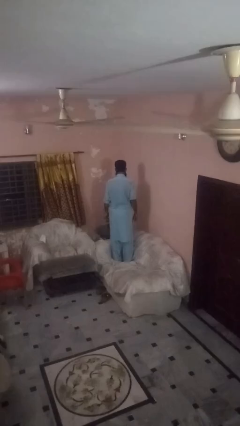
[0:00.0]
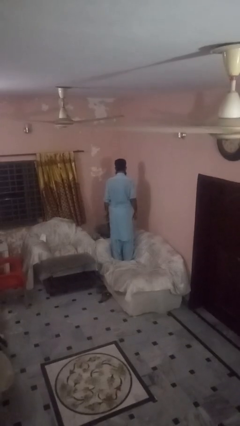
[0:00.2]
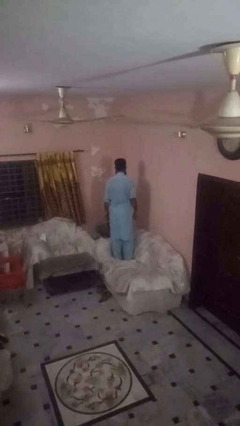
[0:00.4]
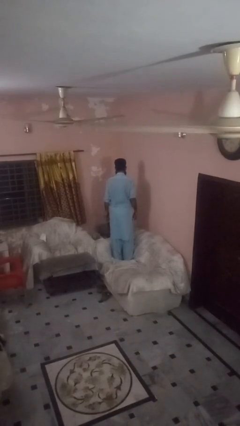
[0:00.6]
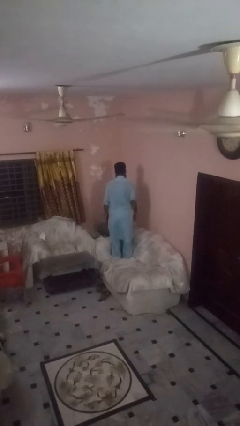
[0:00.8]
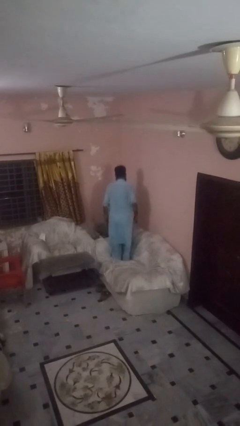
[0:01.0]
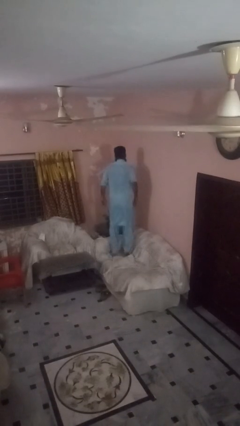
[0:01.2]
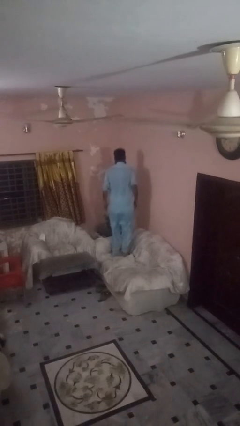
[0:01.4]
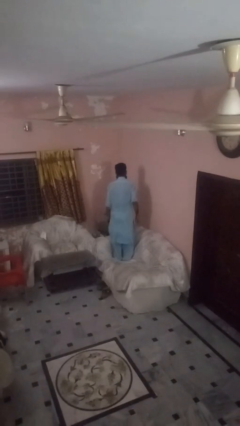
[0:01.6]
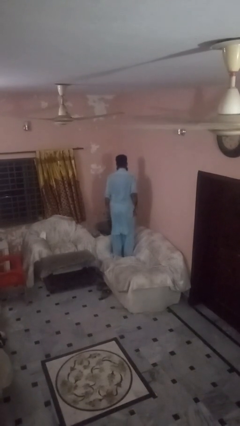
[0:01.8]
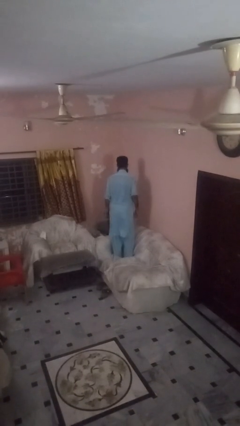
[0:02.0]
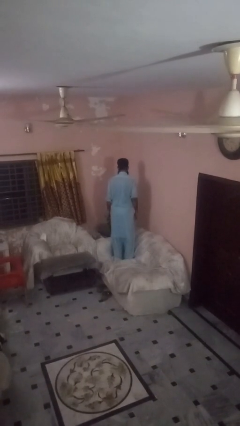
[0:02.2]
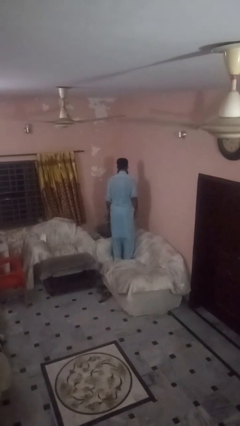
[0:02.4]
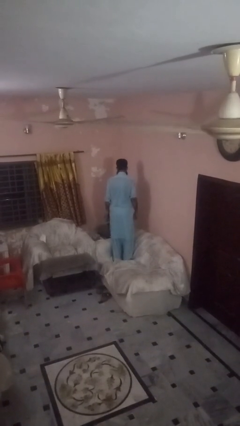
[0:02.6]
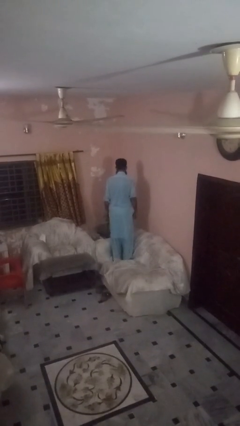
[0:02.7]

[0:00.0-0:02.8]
person jumps on couch

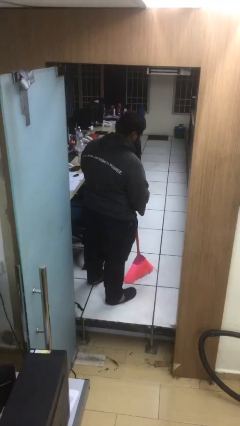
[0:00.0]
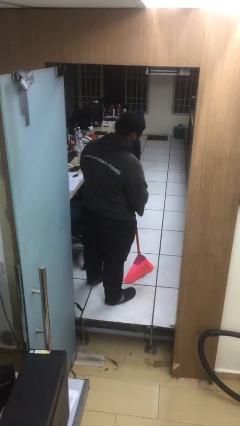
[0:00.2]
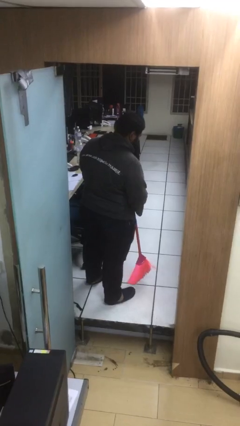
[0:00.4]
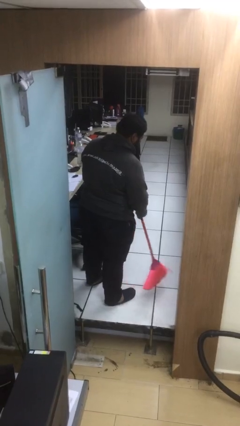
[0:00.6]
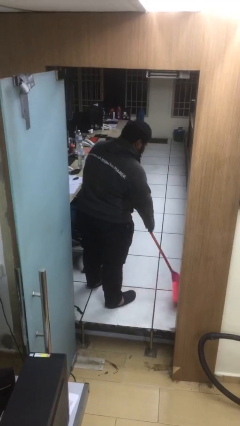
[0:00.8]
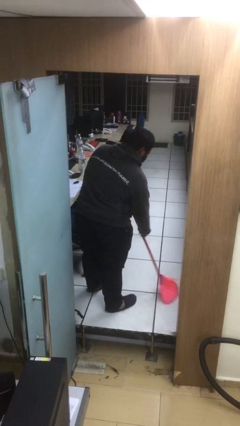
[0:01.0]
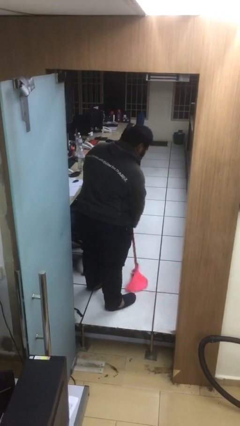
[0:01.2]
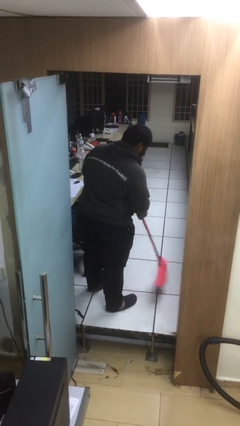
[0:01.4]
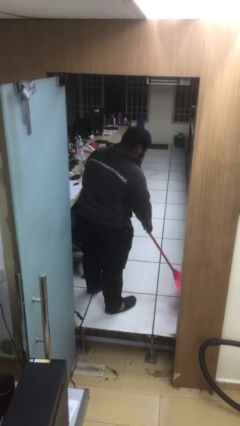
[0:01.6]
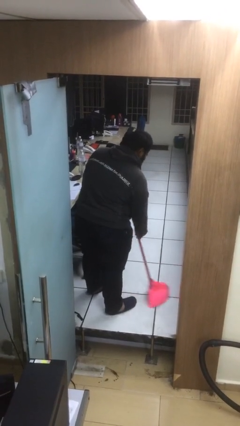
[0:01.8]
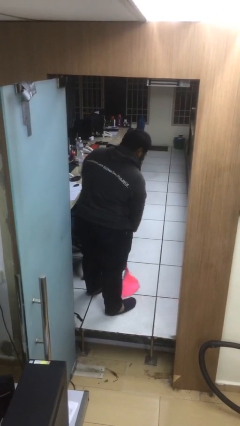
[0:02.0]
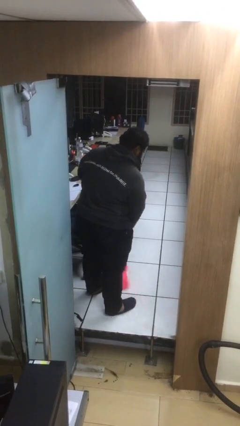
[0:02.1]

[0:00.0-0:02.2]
person sweeps floor

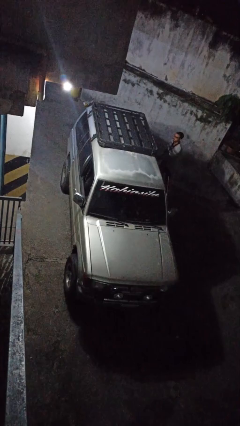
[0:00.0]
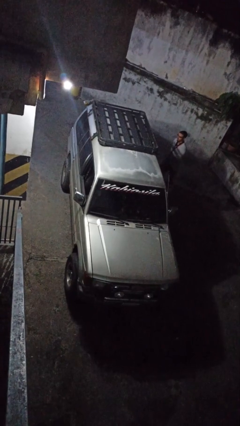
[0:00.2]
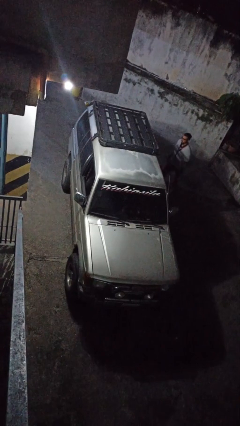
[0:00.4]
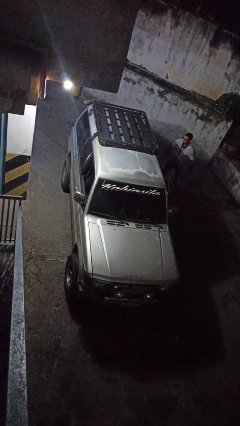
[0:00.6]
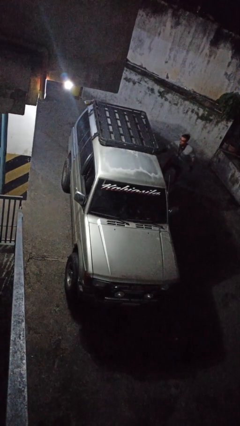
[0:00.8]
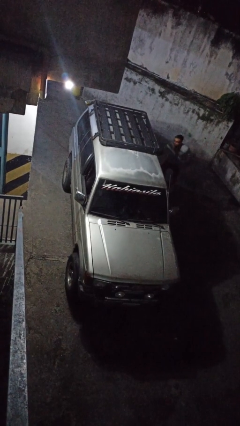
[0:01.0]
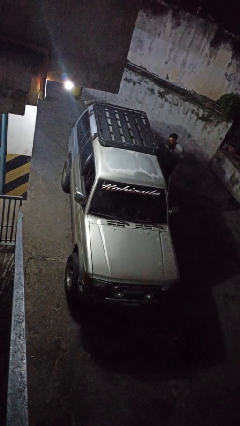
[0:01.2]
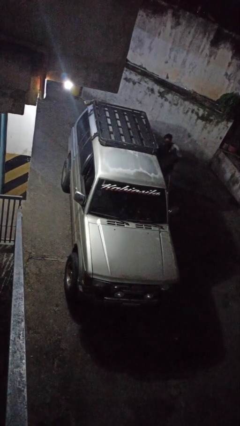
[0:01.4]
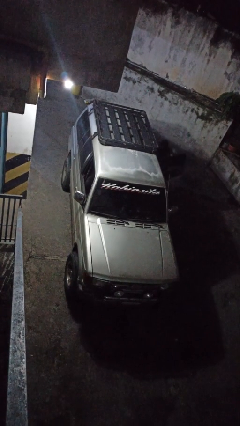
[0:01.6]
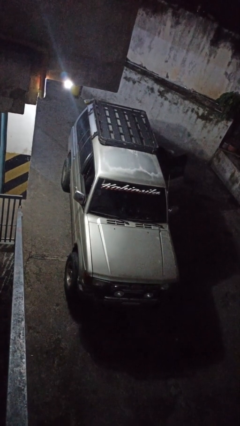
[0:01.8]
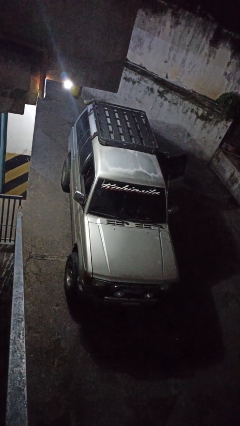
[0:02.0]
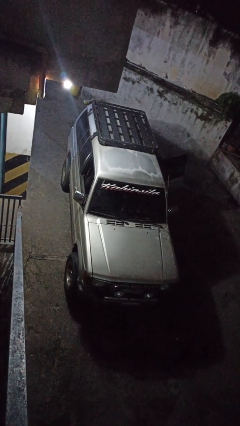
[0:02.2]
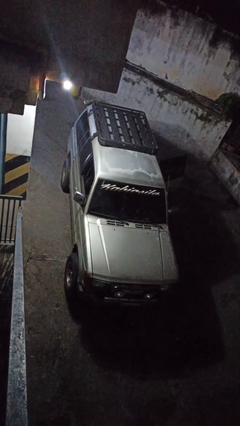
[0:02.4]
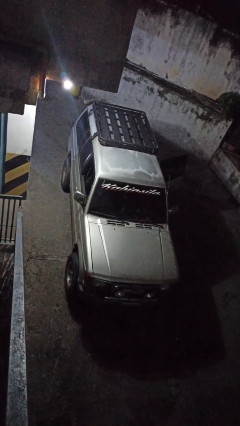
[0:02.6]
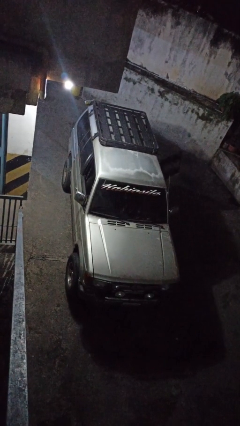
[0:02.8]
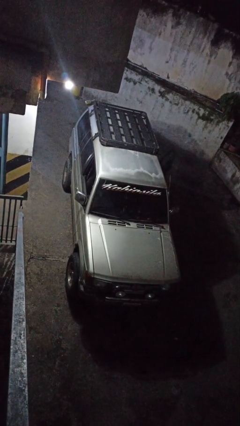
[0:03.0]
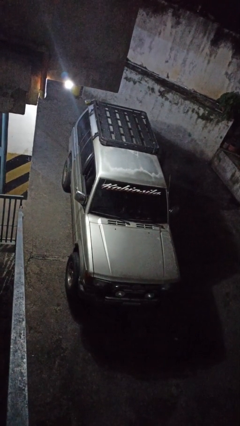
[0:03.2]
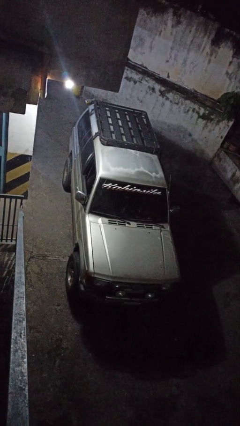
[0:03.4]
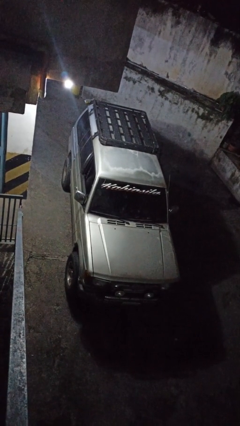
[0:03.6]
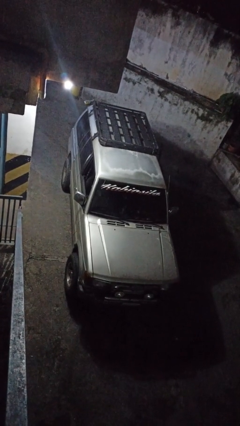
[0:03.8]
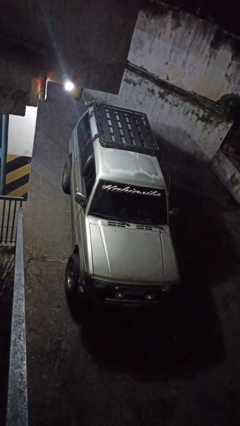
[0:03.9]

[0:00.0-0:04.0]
car picks up person

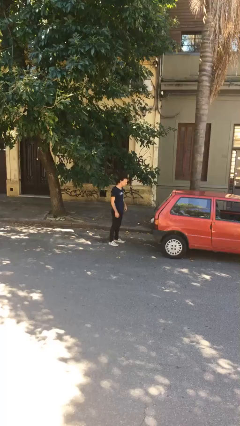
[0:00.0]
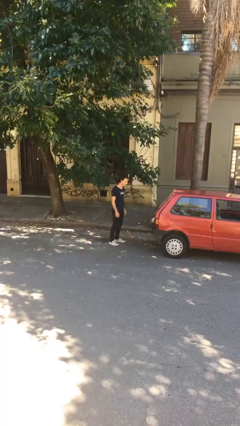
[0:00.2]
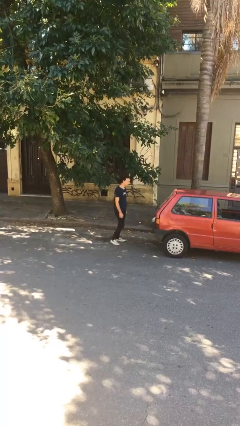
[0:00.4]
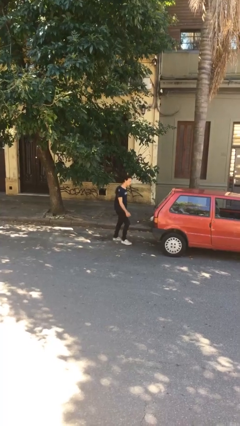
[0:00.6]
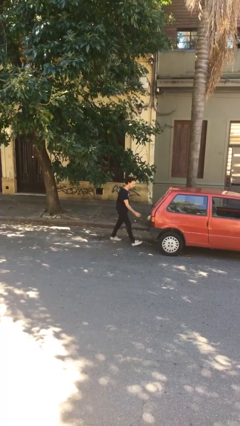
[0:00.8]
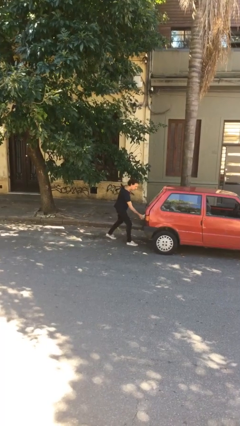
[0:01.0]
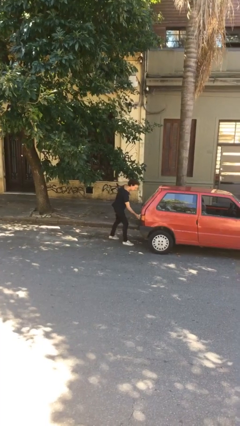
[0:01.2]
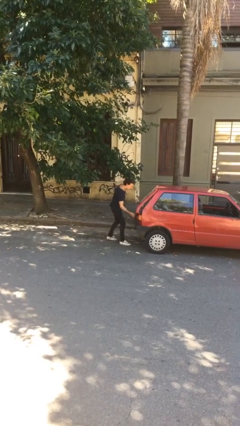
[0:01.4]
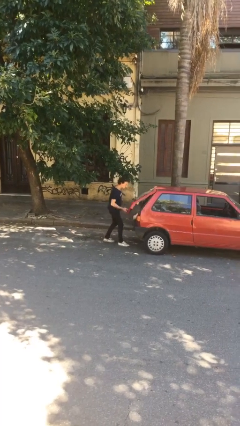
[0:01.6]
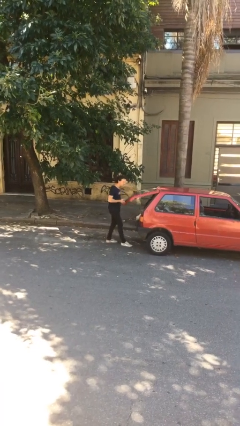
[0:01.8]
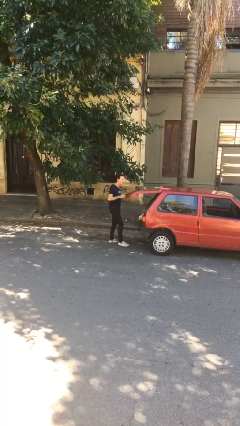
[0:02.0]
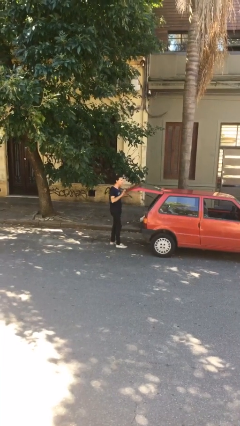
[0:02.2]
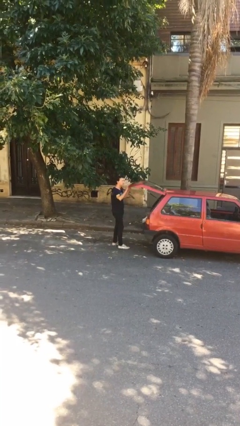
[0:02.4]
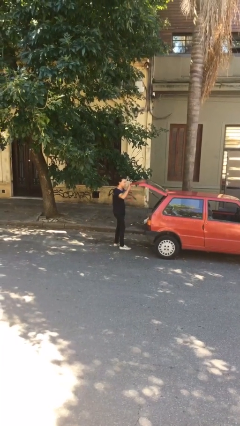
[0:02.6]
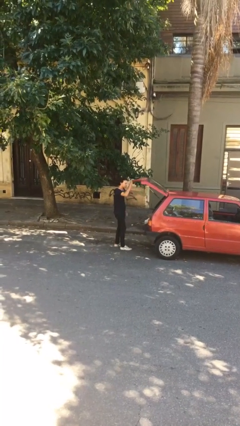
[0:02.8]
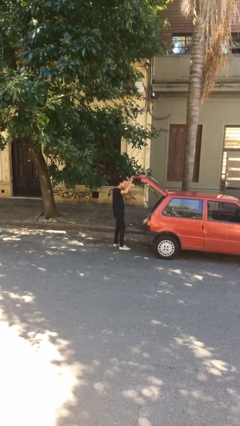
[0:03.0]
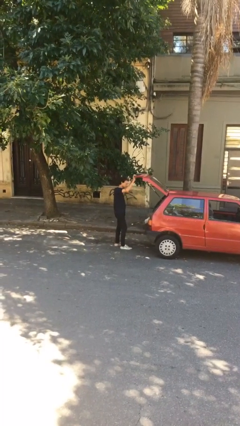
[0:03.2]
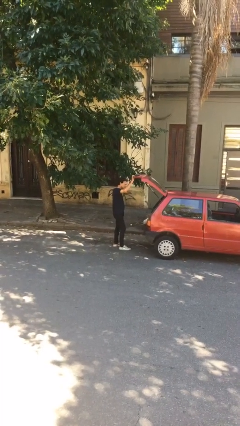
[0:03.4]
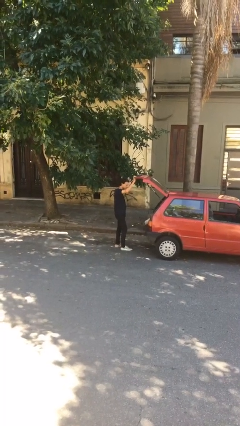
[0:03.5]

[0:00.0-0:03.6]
person opens car trunk

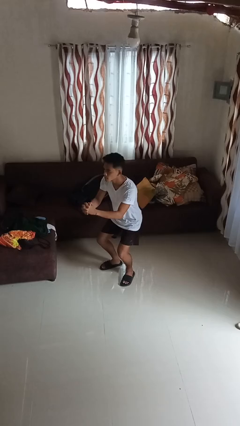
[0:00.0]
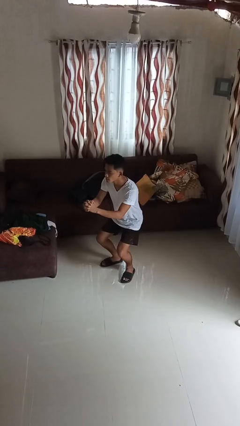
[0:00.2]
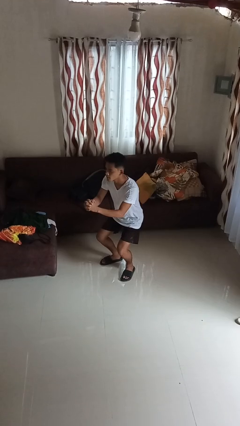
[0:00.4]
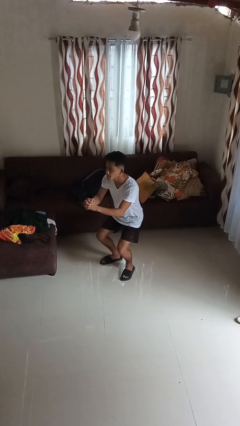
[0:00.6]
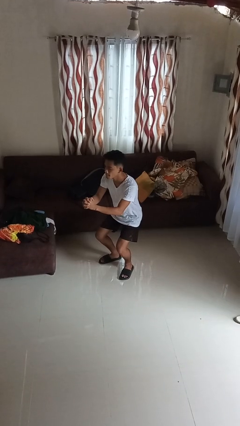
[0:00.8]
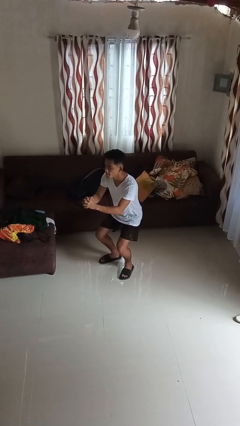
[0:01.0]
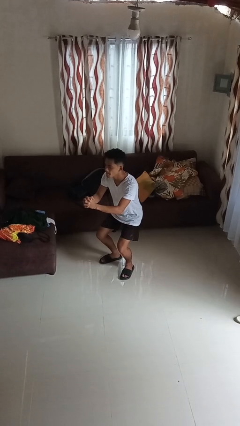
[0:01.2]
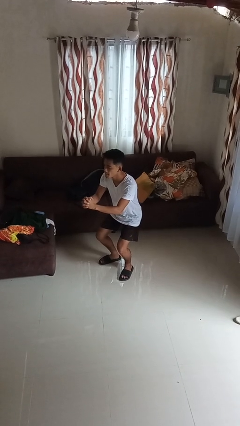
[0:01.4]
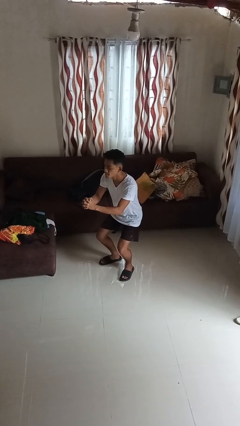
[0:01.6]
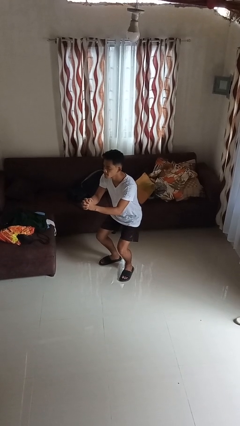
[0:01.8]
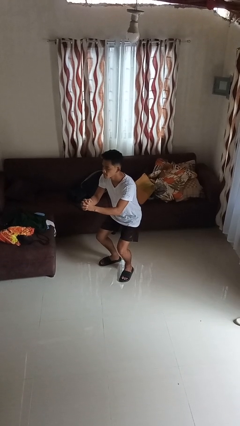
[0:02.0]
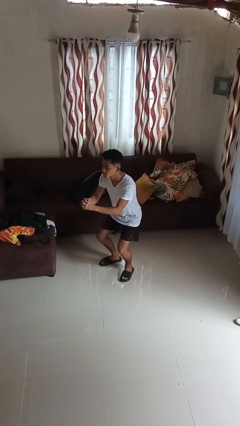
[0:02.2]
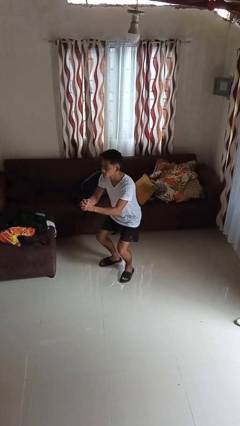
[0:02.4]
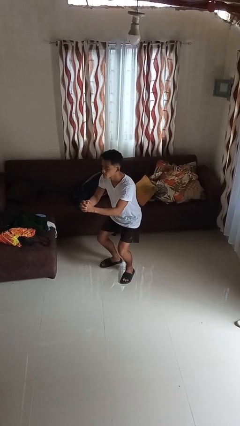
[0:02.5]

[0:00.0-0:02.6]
person squats

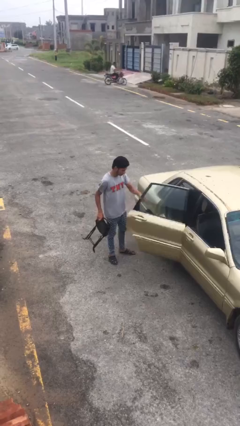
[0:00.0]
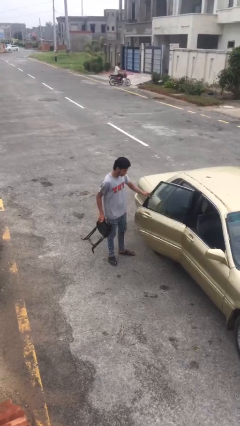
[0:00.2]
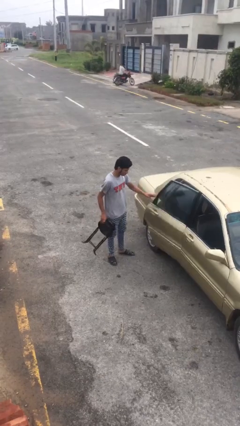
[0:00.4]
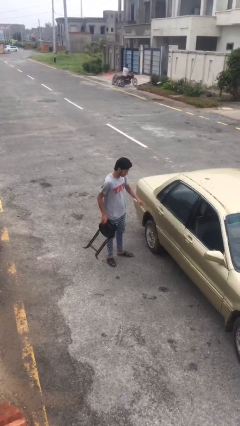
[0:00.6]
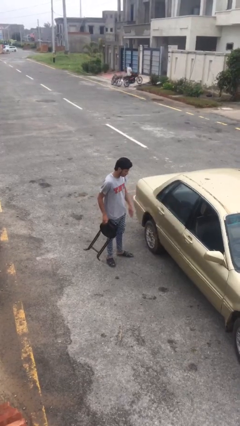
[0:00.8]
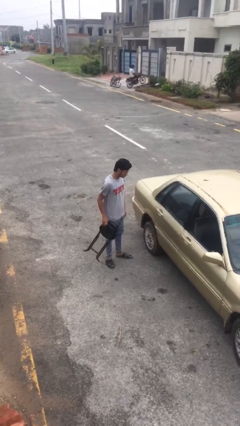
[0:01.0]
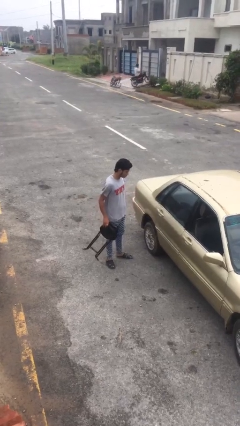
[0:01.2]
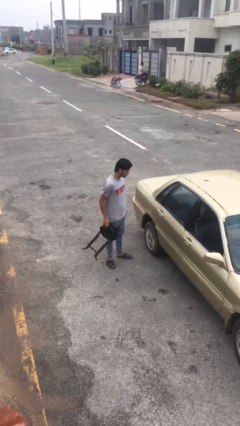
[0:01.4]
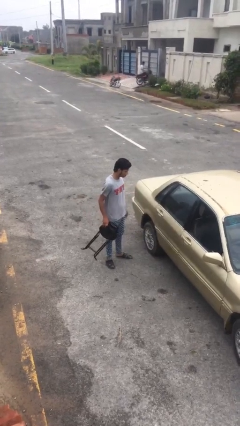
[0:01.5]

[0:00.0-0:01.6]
person closes car door

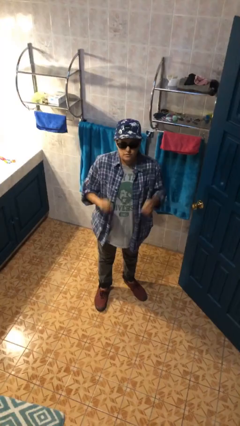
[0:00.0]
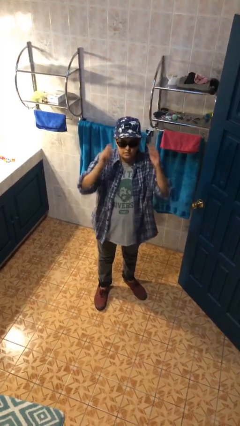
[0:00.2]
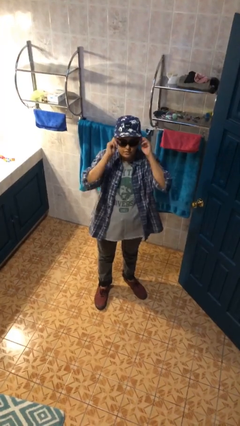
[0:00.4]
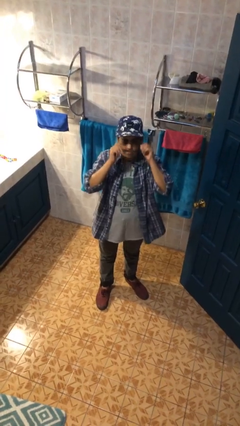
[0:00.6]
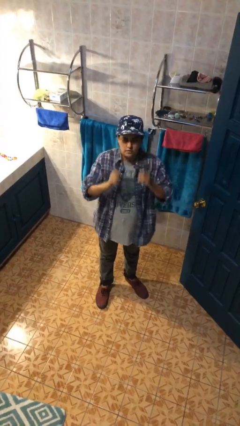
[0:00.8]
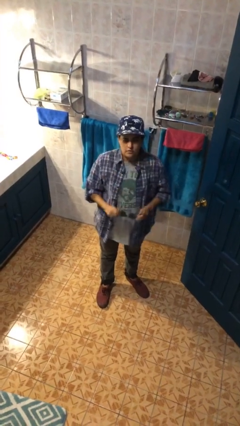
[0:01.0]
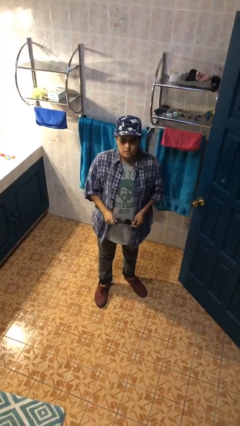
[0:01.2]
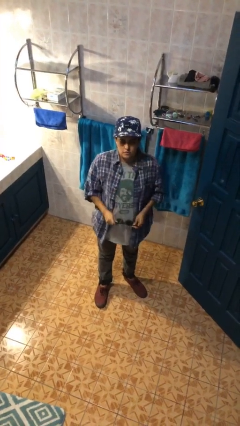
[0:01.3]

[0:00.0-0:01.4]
person takes off sunglasses
